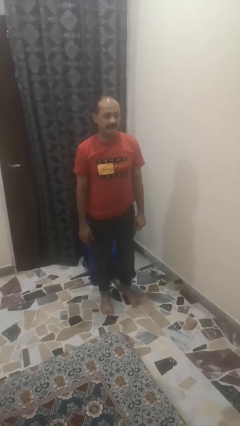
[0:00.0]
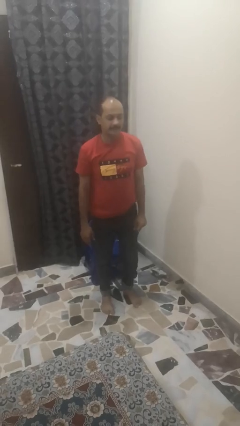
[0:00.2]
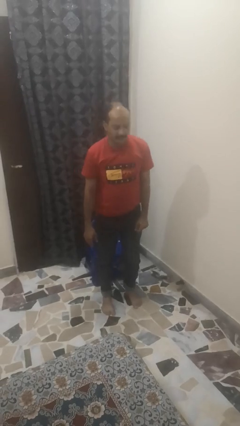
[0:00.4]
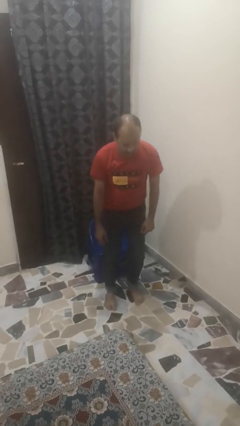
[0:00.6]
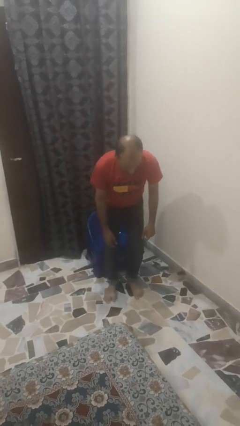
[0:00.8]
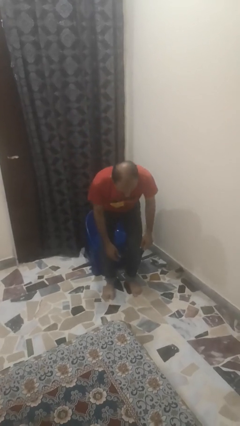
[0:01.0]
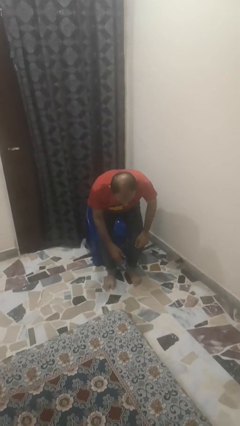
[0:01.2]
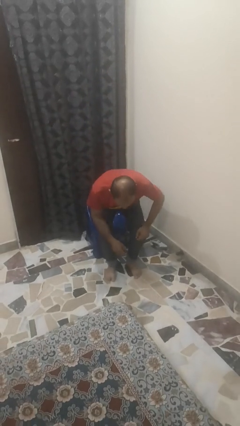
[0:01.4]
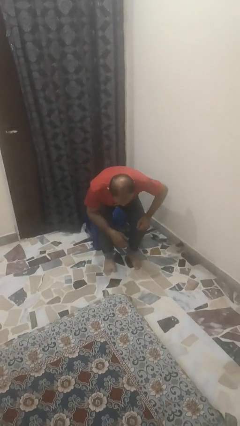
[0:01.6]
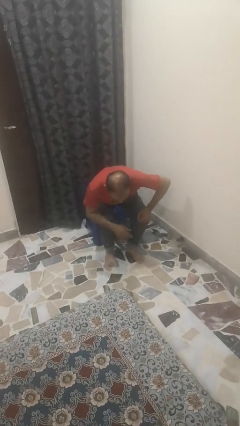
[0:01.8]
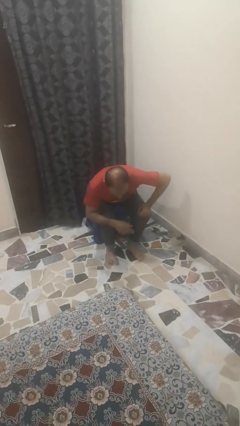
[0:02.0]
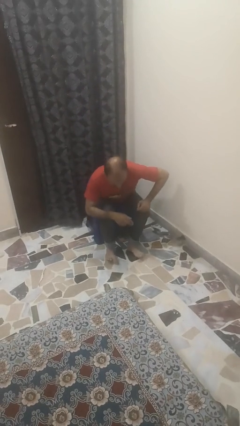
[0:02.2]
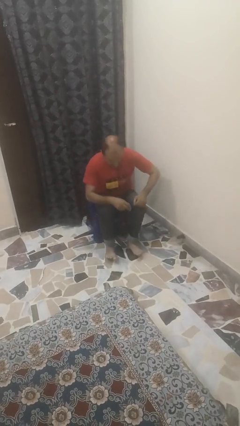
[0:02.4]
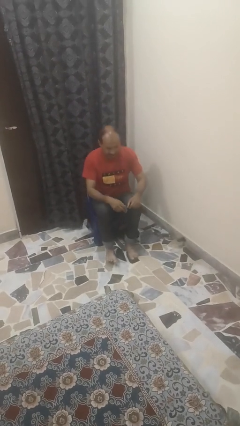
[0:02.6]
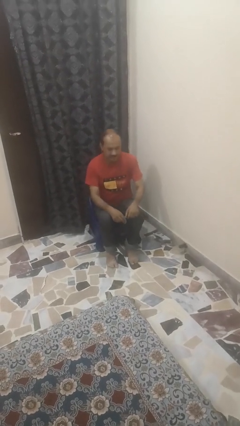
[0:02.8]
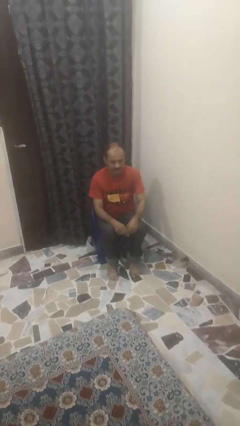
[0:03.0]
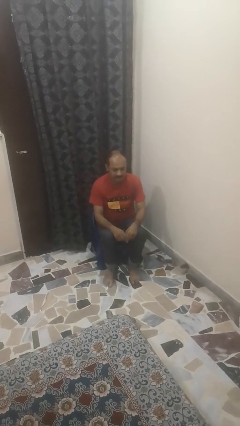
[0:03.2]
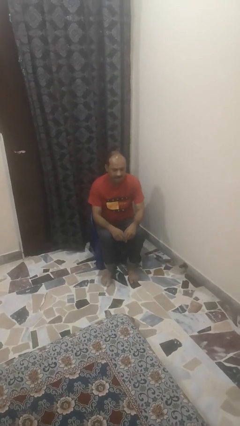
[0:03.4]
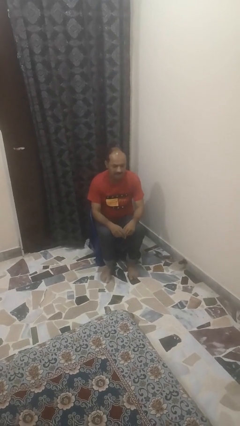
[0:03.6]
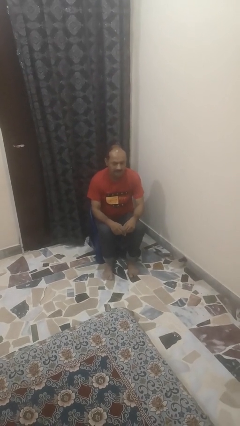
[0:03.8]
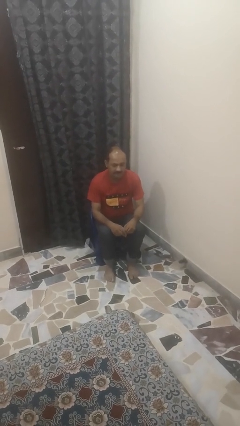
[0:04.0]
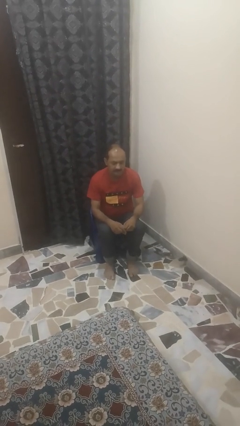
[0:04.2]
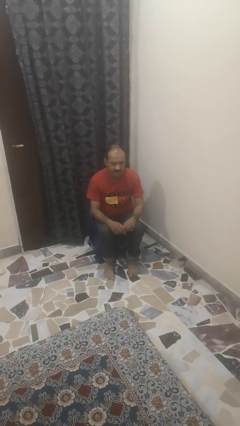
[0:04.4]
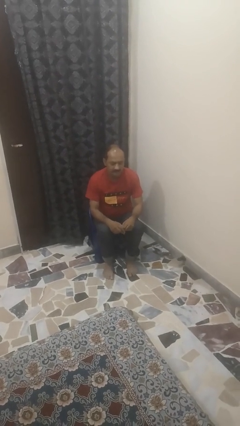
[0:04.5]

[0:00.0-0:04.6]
person sits down

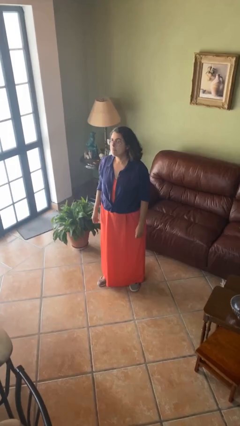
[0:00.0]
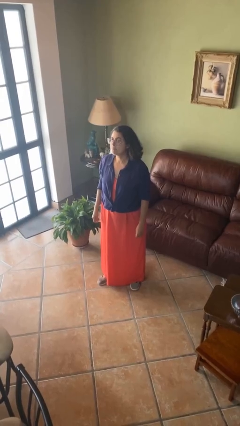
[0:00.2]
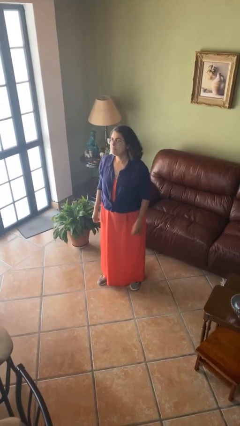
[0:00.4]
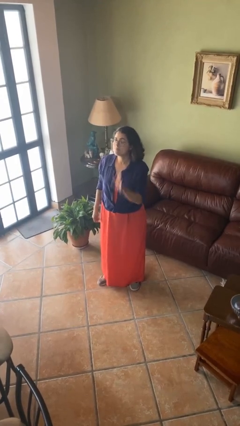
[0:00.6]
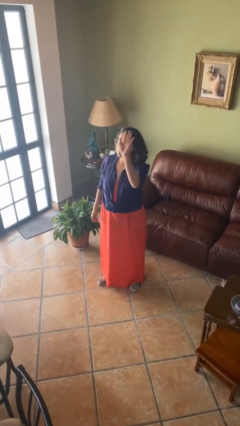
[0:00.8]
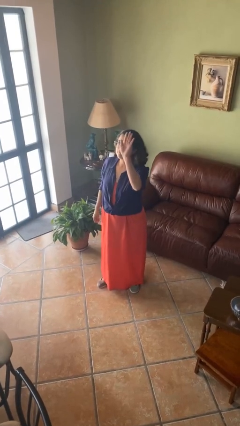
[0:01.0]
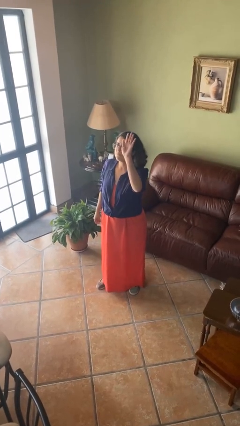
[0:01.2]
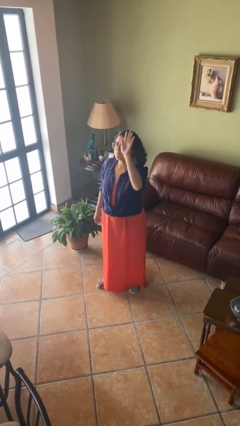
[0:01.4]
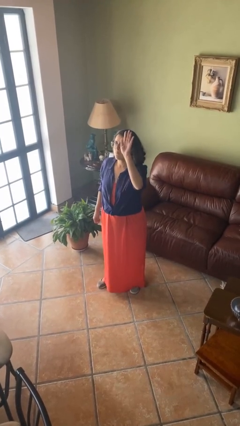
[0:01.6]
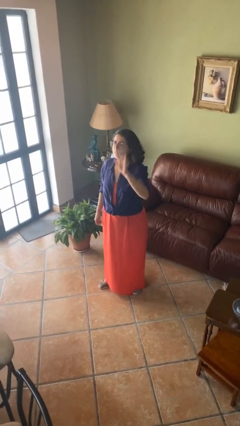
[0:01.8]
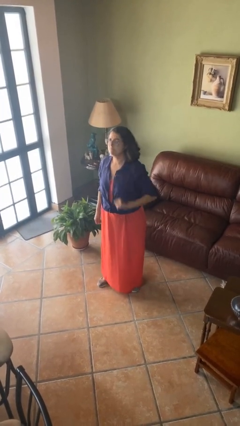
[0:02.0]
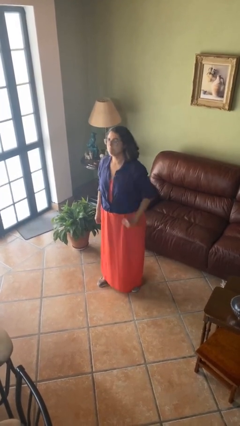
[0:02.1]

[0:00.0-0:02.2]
person gestures raise hand

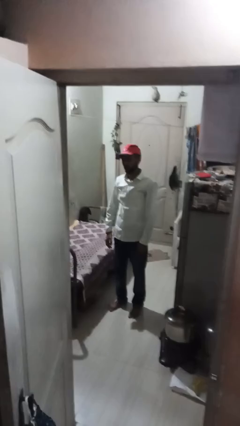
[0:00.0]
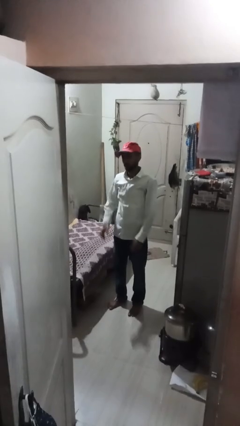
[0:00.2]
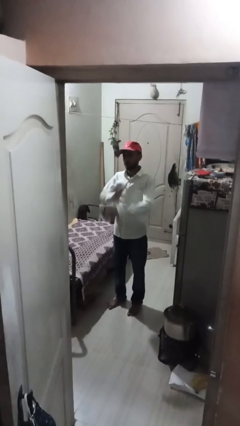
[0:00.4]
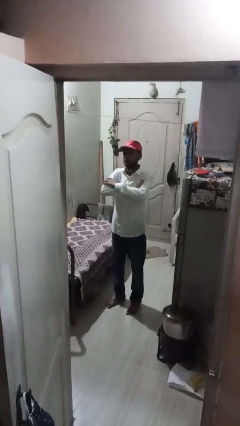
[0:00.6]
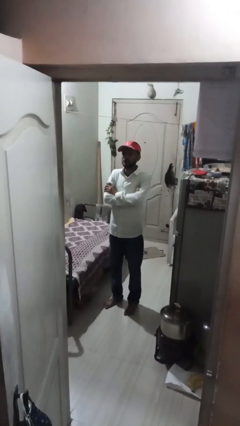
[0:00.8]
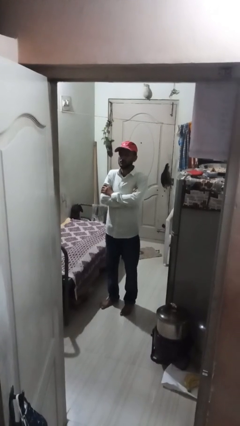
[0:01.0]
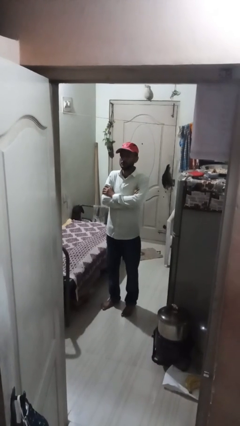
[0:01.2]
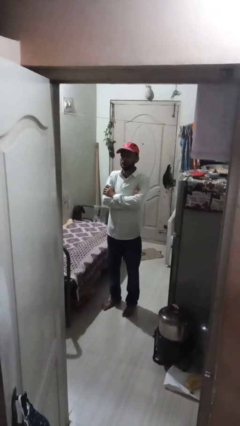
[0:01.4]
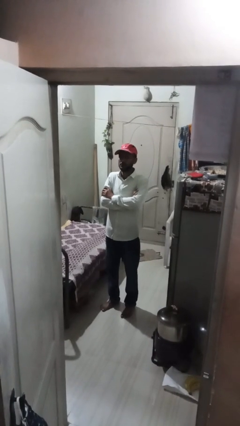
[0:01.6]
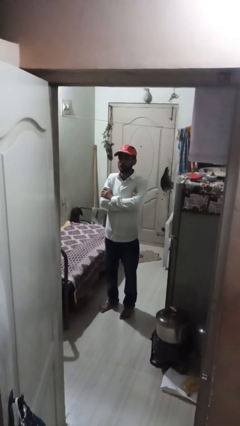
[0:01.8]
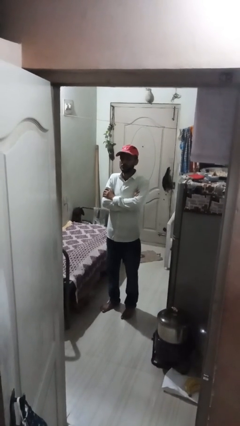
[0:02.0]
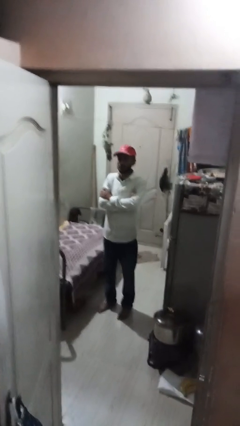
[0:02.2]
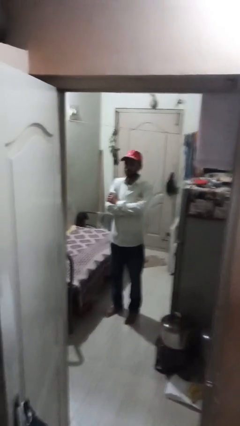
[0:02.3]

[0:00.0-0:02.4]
person crosses arms

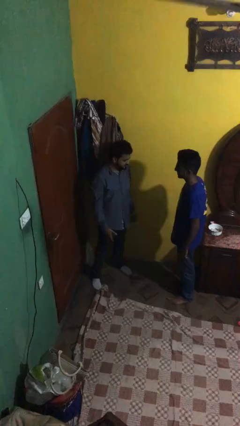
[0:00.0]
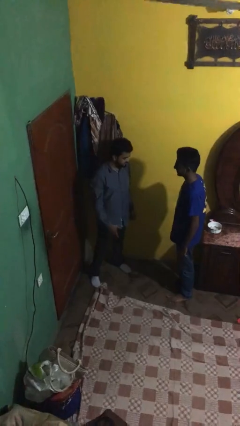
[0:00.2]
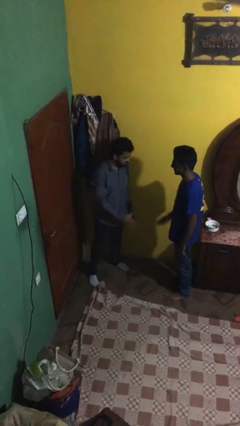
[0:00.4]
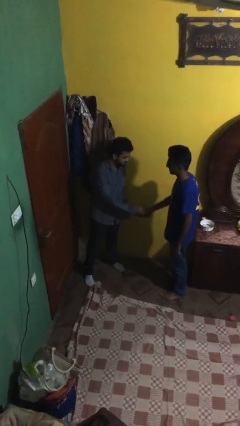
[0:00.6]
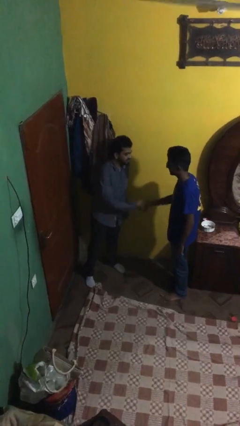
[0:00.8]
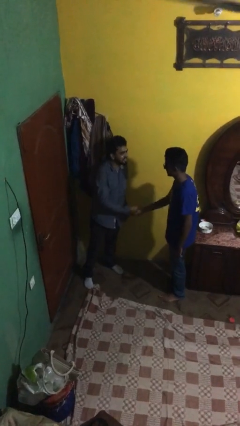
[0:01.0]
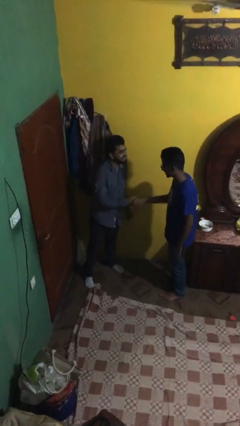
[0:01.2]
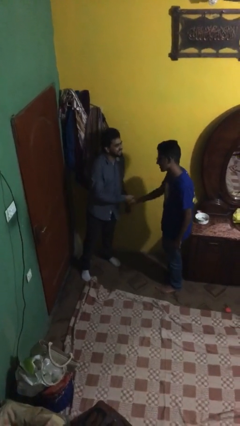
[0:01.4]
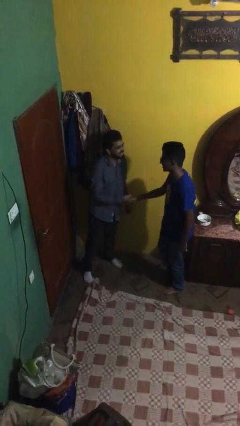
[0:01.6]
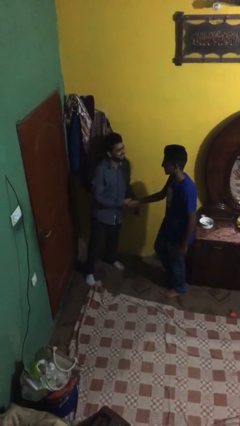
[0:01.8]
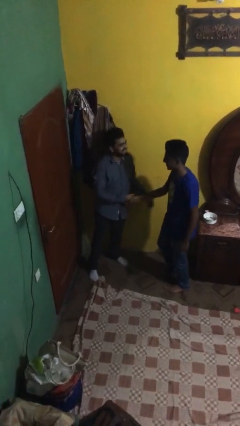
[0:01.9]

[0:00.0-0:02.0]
person shakes hand

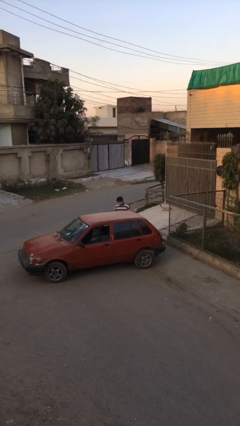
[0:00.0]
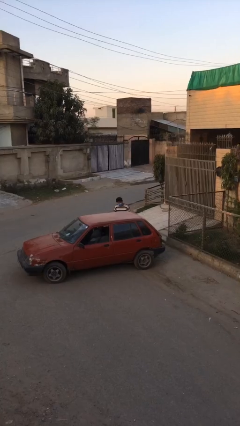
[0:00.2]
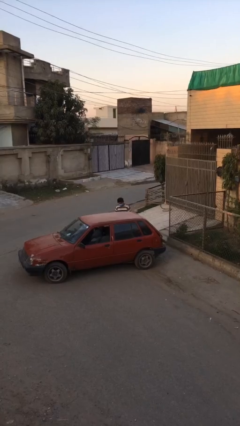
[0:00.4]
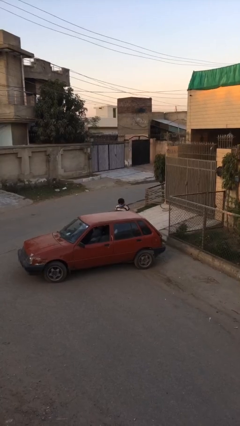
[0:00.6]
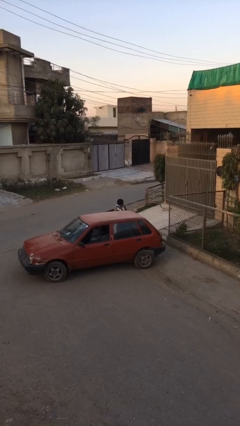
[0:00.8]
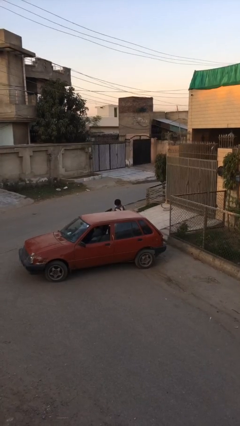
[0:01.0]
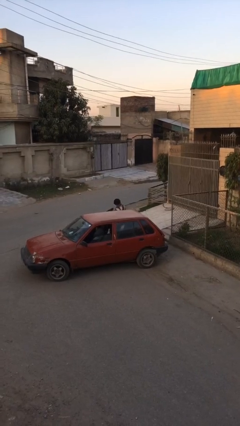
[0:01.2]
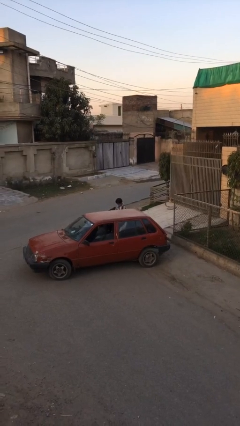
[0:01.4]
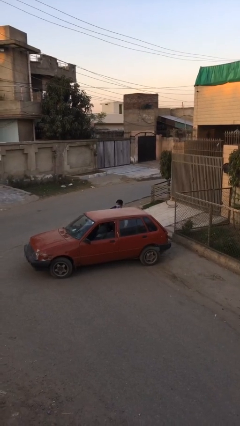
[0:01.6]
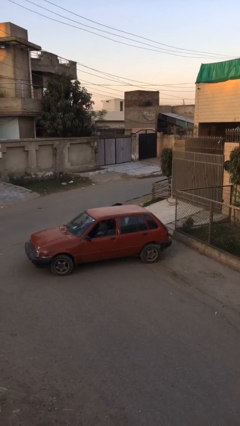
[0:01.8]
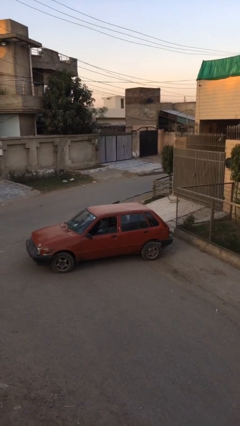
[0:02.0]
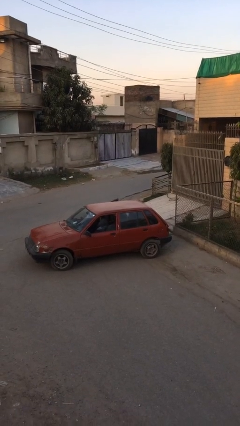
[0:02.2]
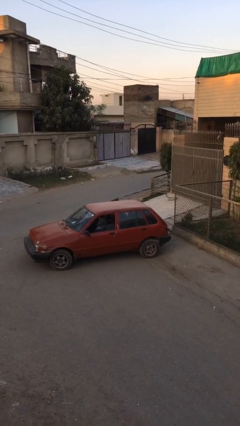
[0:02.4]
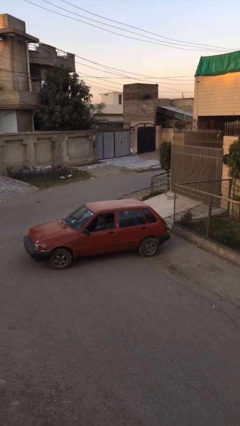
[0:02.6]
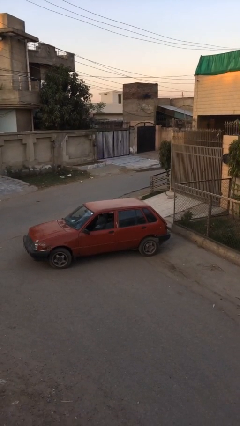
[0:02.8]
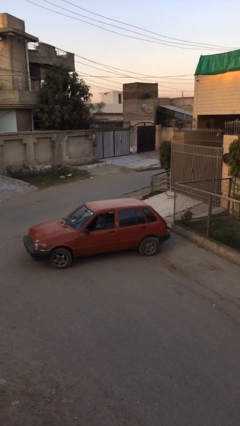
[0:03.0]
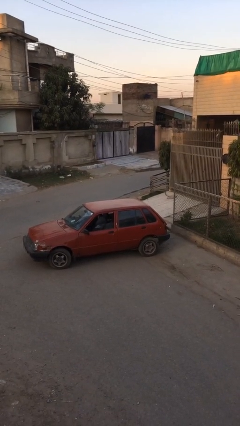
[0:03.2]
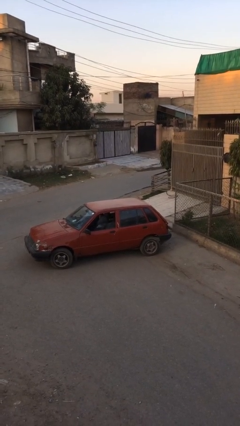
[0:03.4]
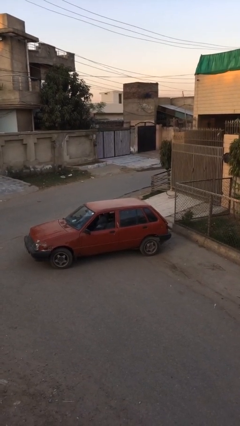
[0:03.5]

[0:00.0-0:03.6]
person enters car

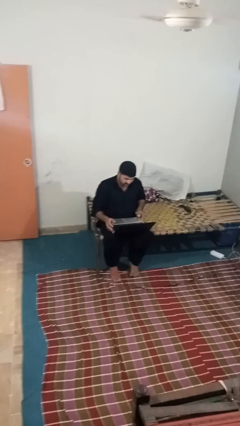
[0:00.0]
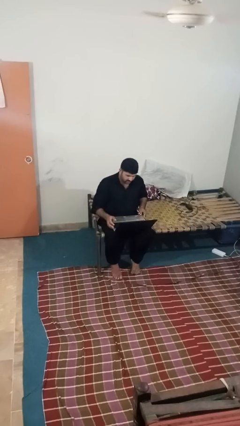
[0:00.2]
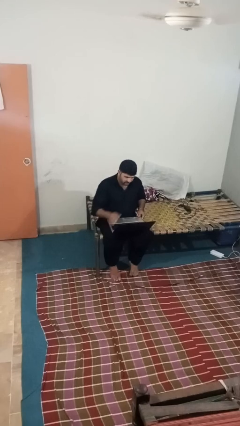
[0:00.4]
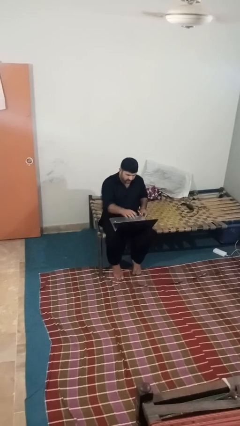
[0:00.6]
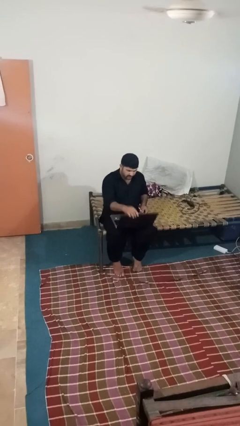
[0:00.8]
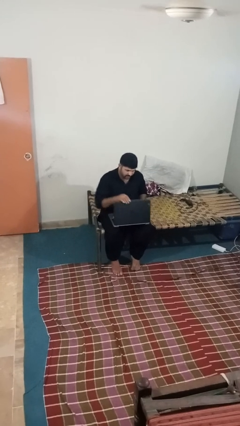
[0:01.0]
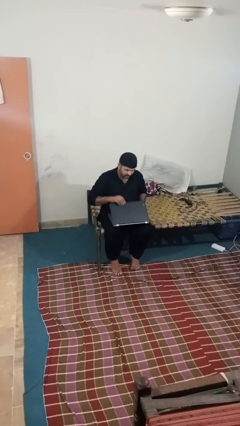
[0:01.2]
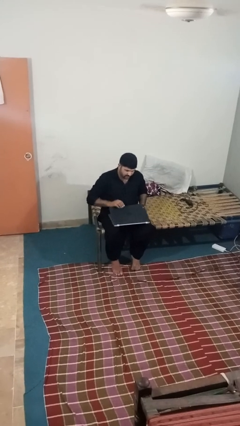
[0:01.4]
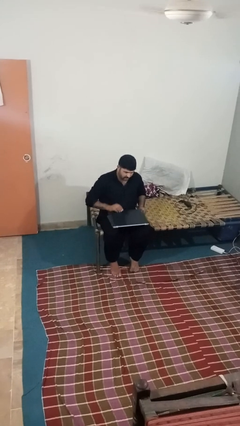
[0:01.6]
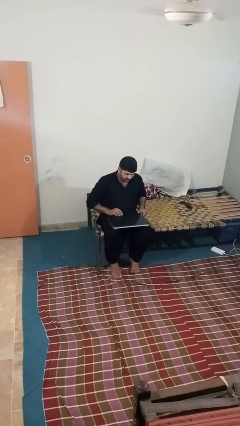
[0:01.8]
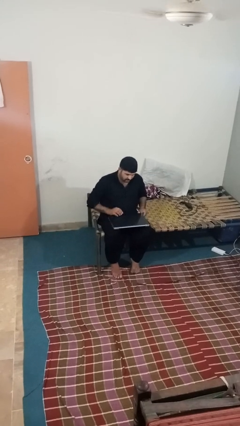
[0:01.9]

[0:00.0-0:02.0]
person closes laptop

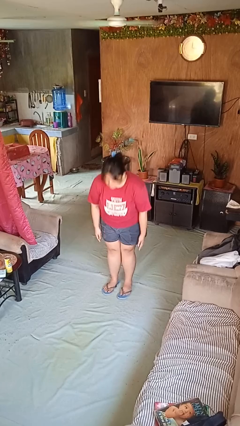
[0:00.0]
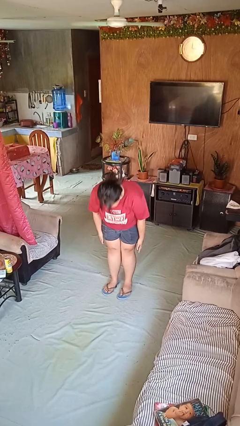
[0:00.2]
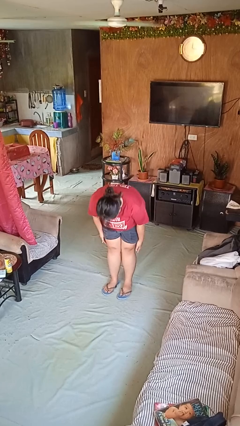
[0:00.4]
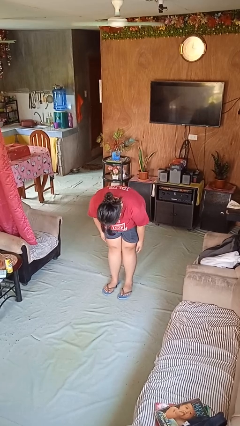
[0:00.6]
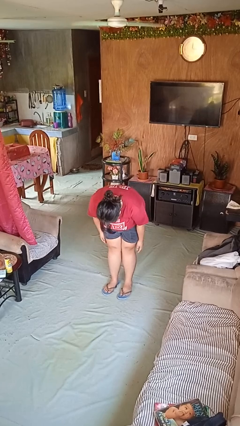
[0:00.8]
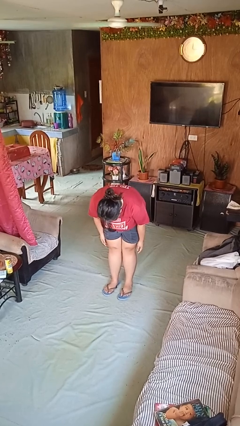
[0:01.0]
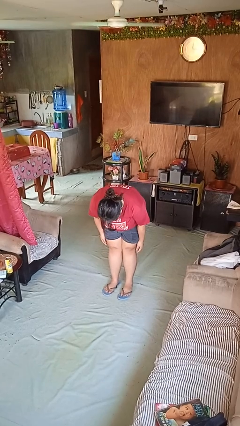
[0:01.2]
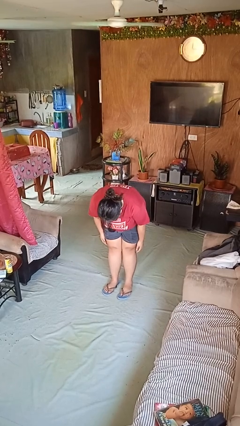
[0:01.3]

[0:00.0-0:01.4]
person bows
